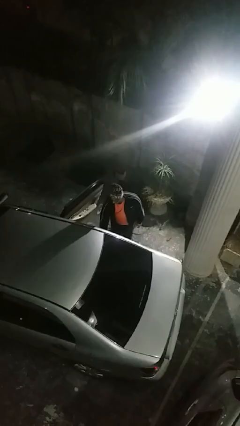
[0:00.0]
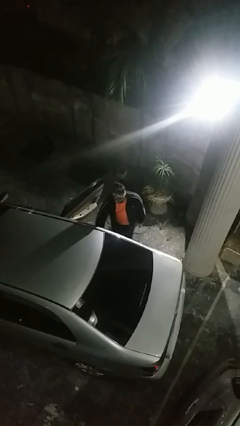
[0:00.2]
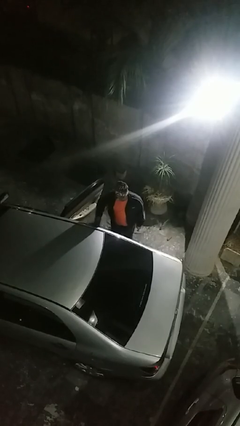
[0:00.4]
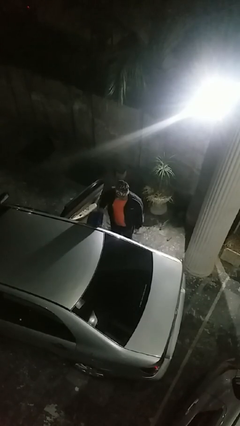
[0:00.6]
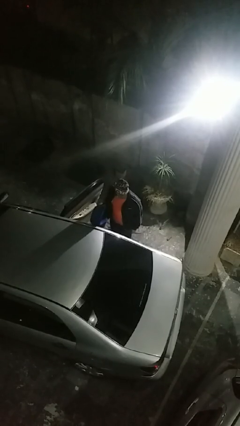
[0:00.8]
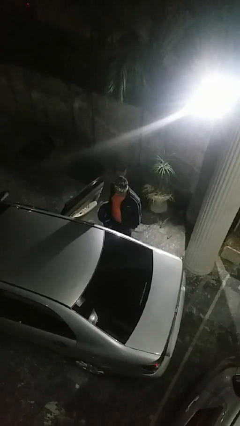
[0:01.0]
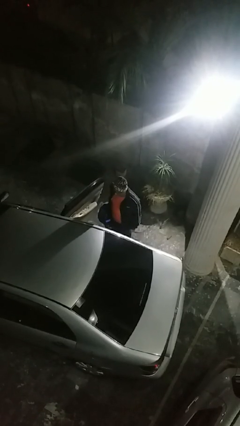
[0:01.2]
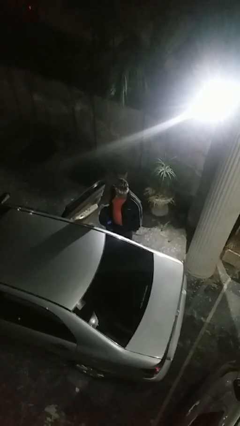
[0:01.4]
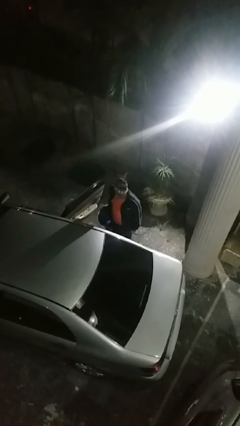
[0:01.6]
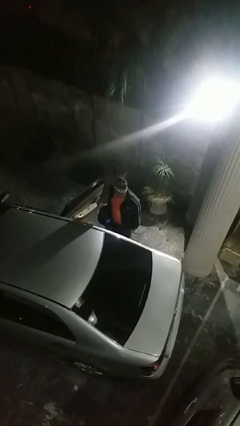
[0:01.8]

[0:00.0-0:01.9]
person unloads car

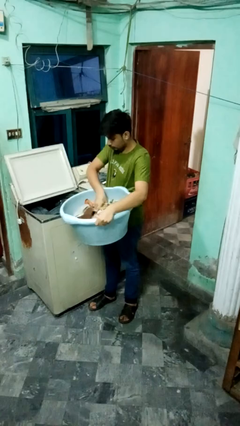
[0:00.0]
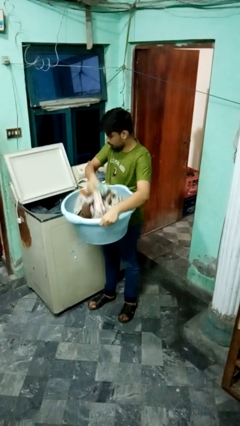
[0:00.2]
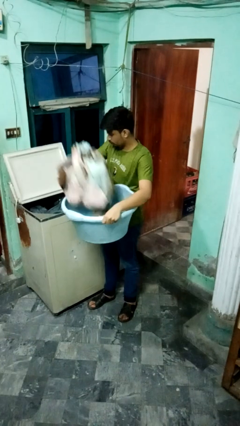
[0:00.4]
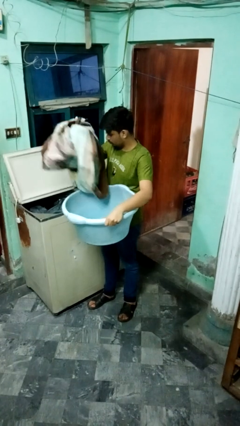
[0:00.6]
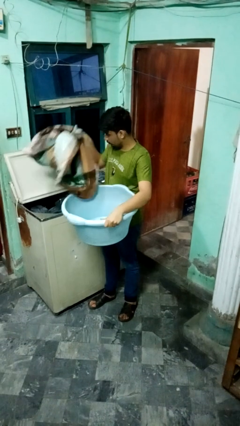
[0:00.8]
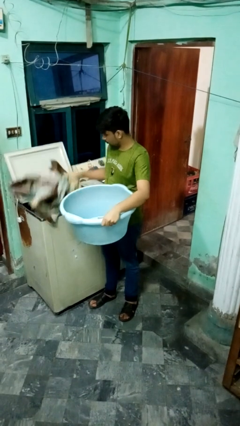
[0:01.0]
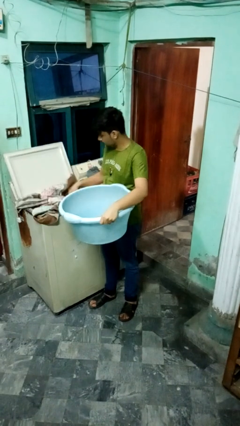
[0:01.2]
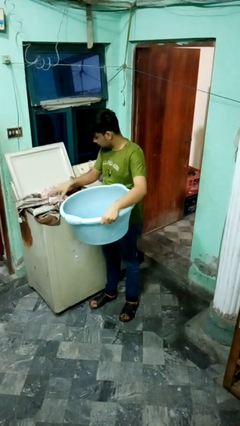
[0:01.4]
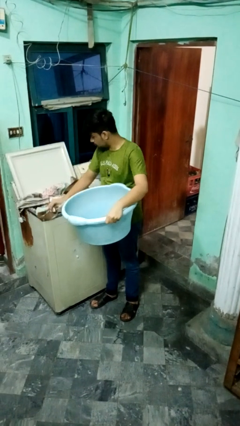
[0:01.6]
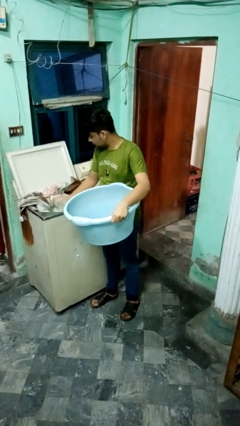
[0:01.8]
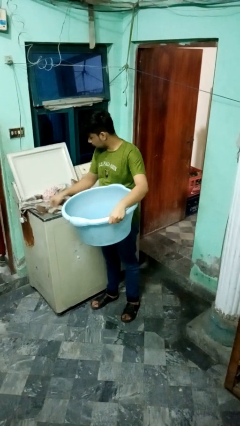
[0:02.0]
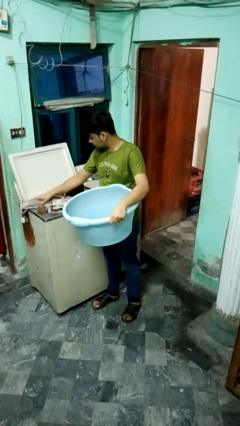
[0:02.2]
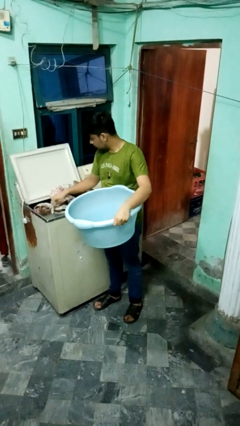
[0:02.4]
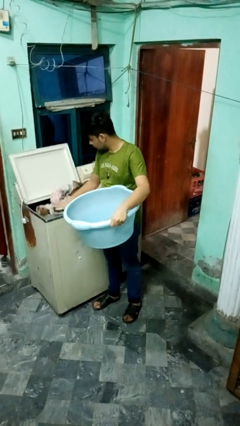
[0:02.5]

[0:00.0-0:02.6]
person loads clotheswasher

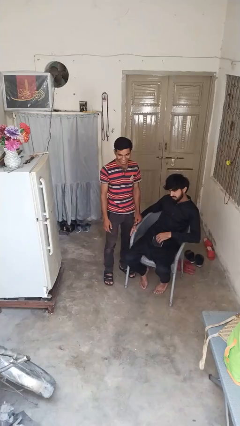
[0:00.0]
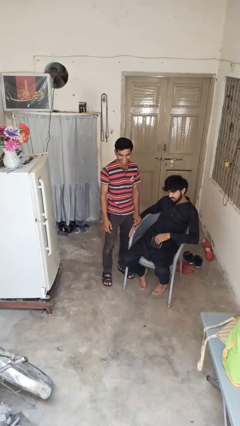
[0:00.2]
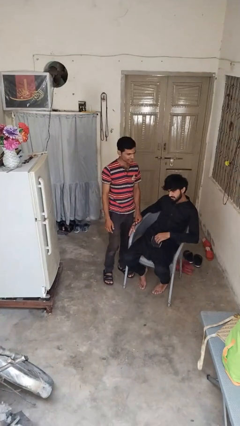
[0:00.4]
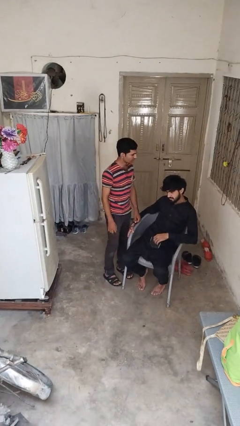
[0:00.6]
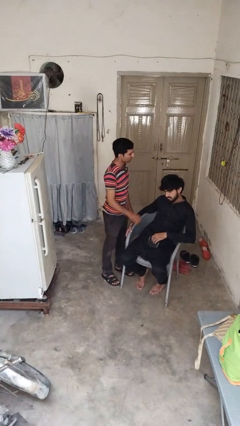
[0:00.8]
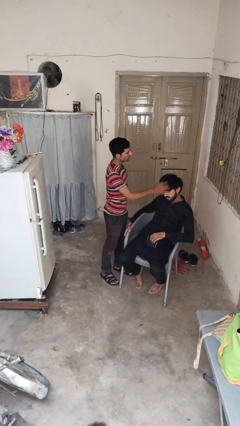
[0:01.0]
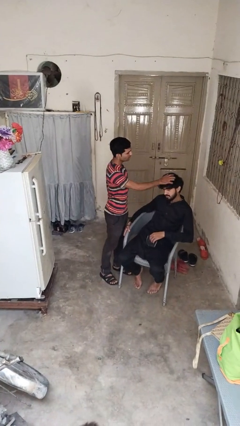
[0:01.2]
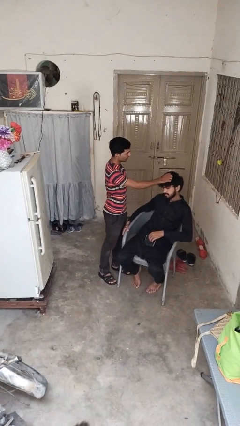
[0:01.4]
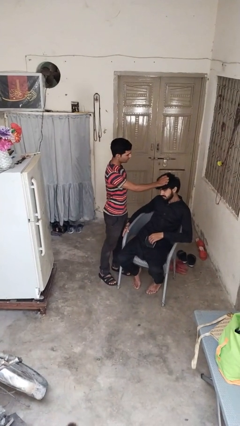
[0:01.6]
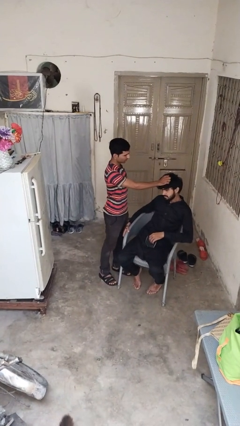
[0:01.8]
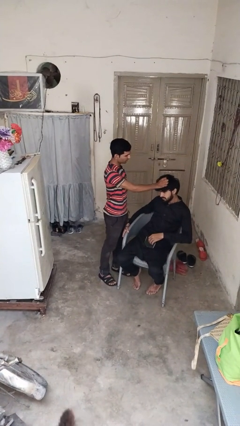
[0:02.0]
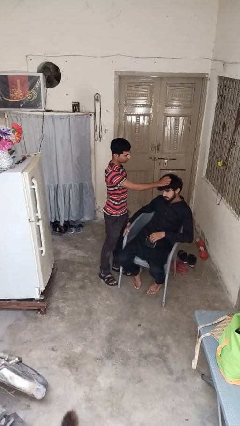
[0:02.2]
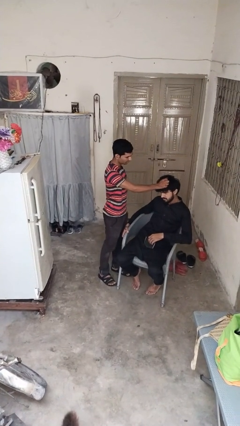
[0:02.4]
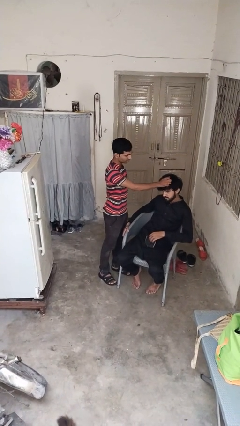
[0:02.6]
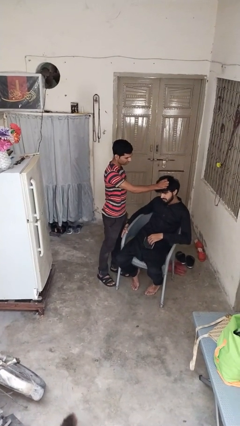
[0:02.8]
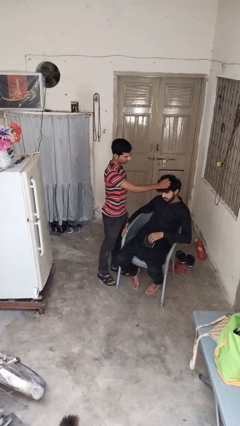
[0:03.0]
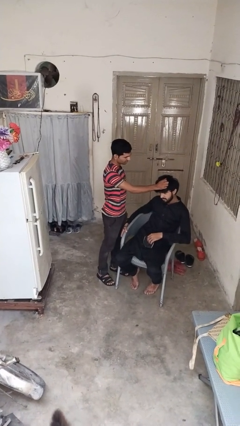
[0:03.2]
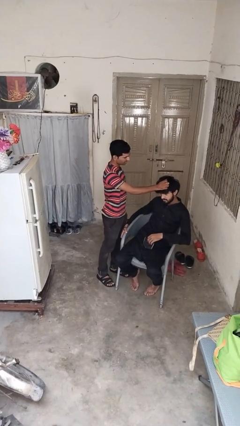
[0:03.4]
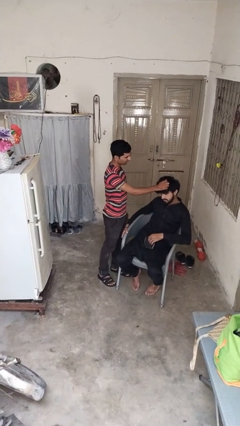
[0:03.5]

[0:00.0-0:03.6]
person grabs person by hair

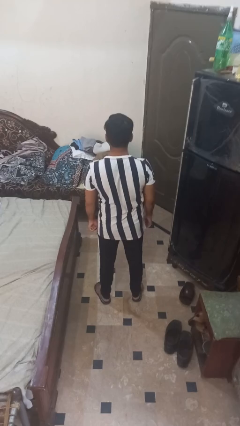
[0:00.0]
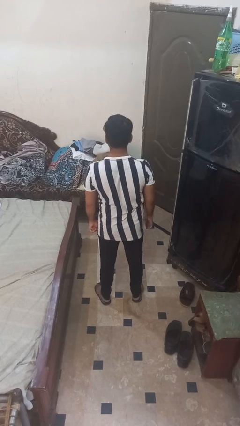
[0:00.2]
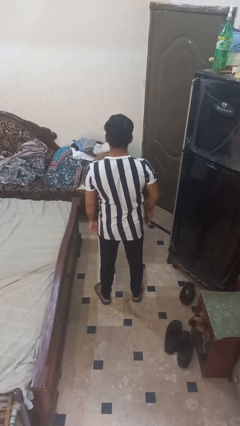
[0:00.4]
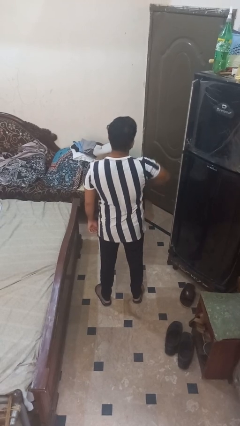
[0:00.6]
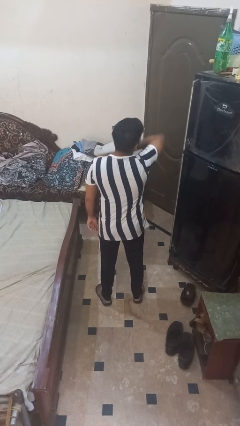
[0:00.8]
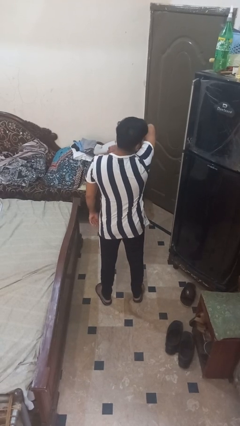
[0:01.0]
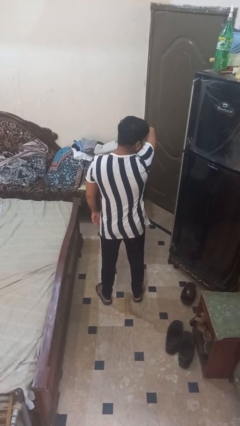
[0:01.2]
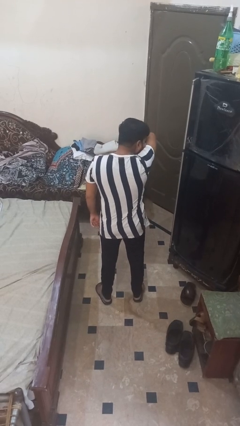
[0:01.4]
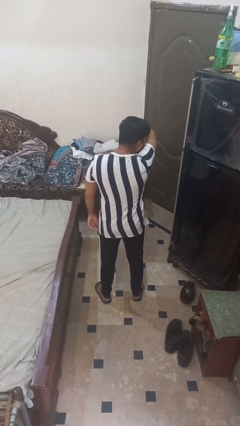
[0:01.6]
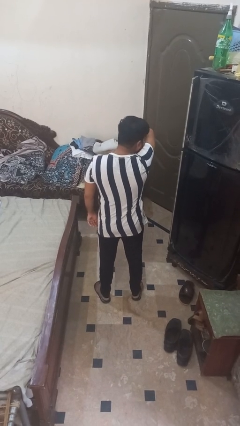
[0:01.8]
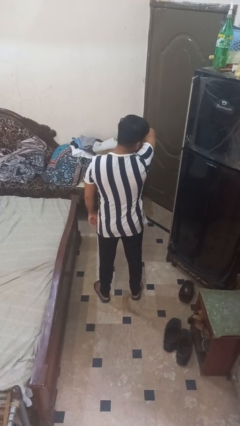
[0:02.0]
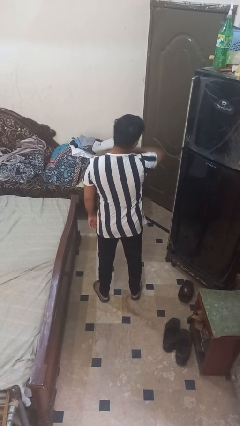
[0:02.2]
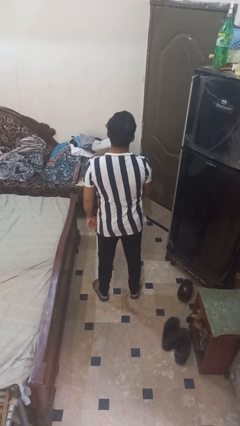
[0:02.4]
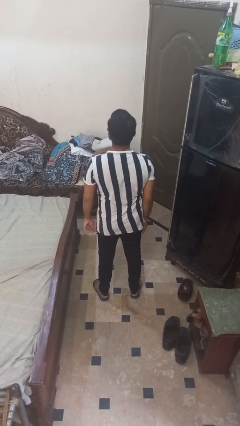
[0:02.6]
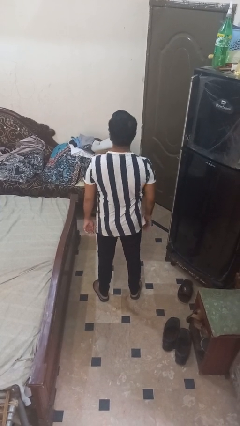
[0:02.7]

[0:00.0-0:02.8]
person sneezes into arm

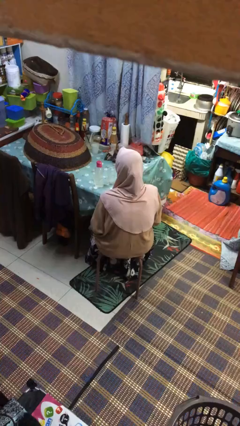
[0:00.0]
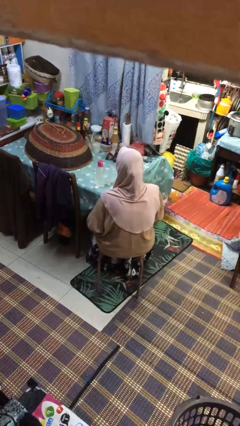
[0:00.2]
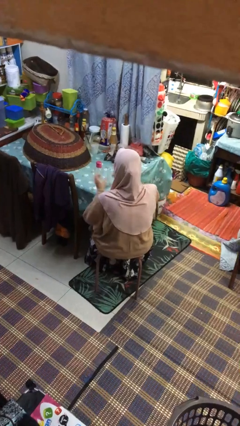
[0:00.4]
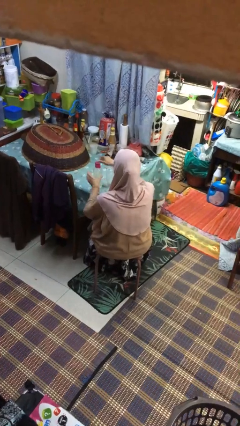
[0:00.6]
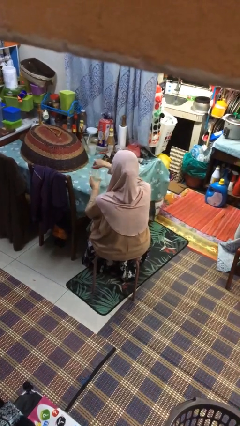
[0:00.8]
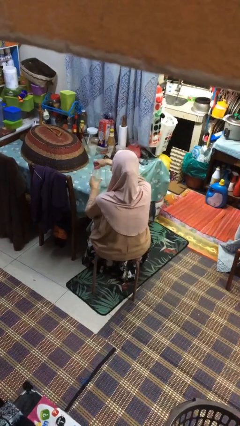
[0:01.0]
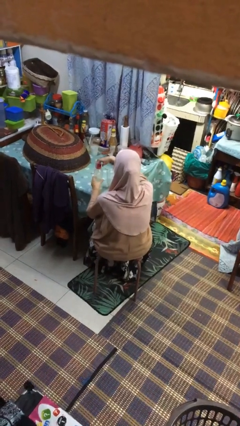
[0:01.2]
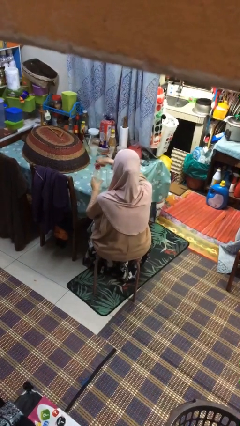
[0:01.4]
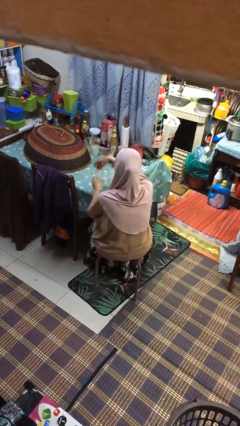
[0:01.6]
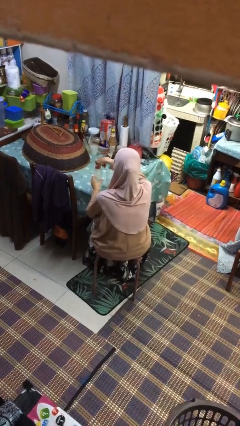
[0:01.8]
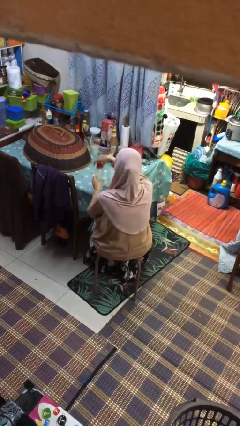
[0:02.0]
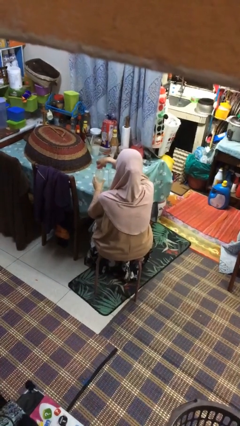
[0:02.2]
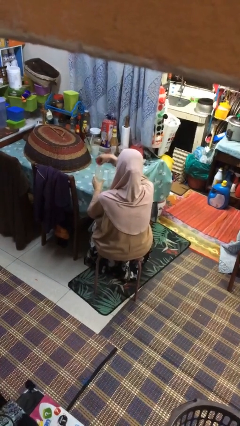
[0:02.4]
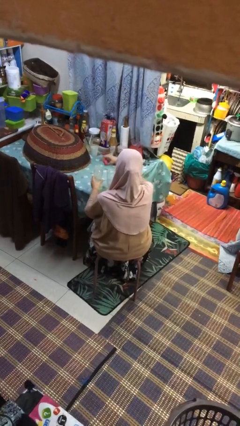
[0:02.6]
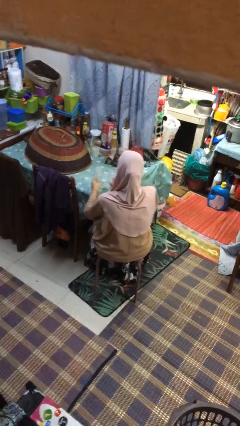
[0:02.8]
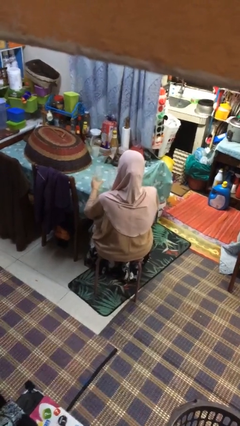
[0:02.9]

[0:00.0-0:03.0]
person unscrews lid from bottle

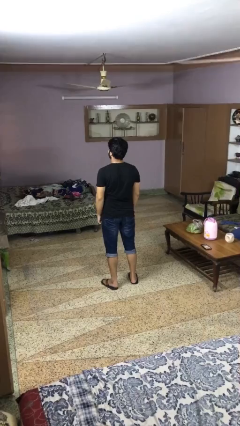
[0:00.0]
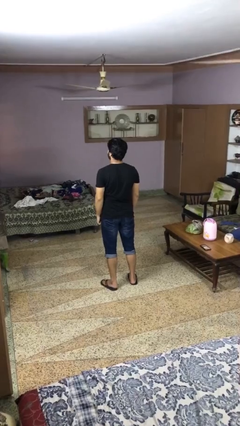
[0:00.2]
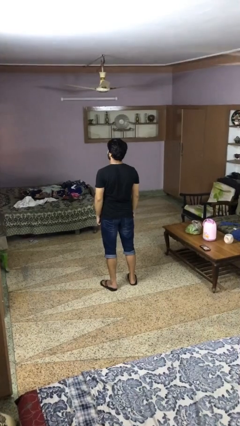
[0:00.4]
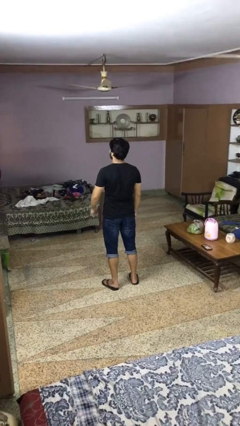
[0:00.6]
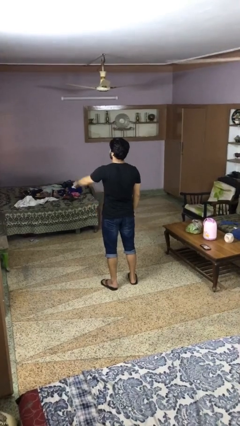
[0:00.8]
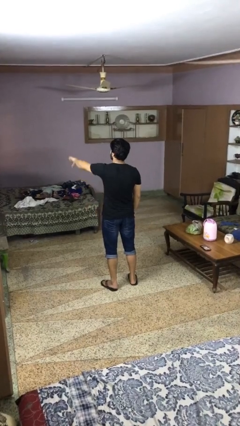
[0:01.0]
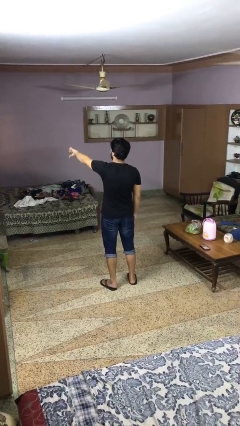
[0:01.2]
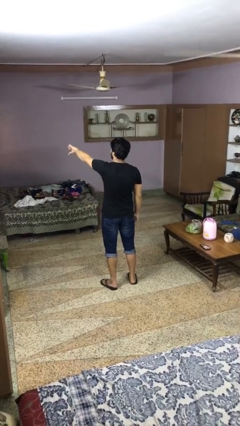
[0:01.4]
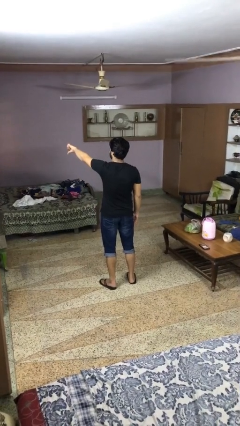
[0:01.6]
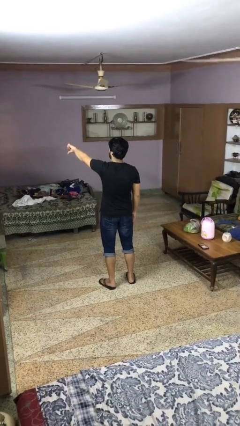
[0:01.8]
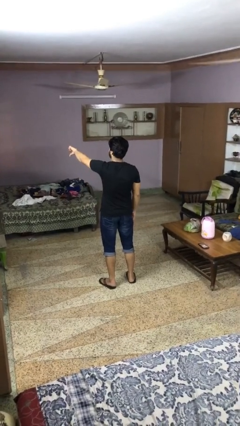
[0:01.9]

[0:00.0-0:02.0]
person gestures thumbs down

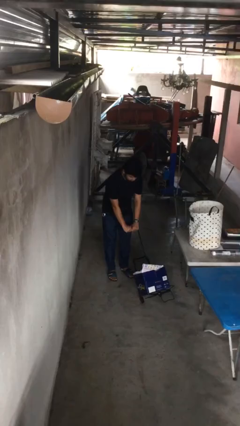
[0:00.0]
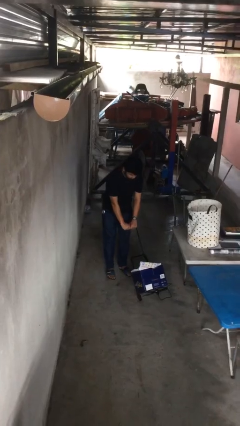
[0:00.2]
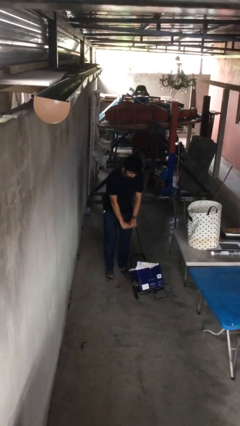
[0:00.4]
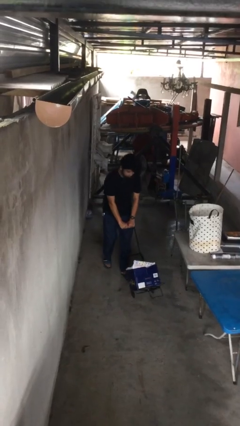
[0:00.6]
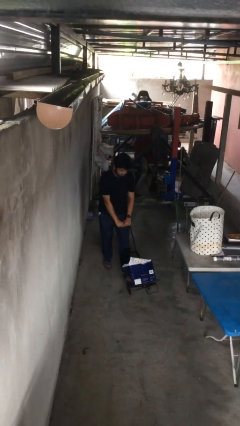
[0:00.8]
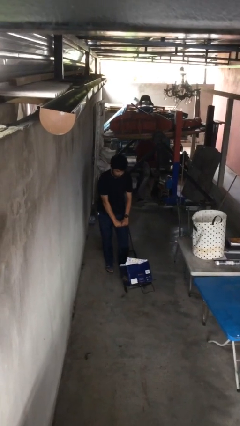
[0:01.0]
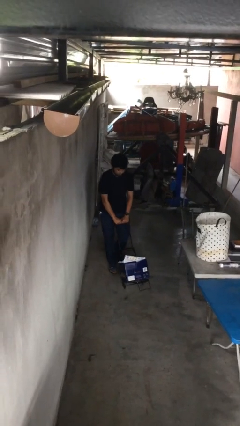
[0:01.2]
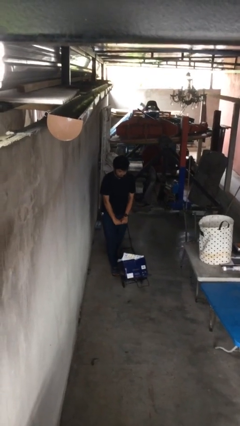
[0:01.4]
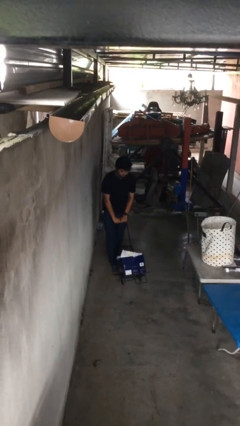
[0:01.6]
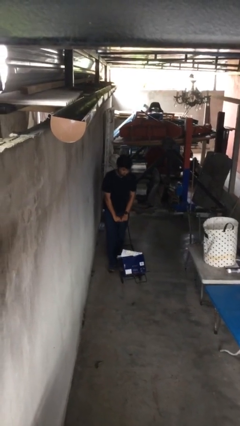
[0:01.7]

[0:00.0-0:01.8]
person pulls wheeled cart
